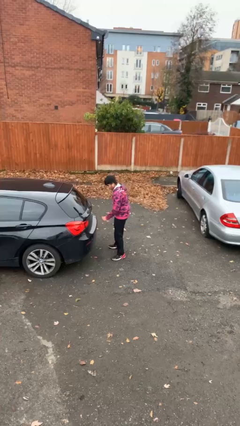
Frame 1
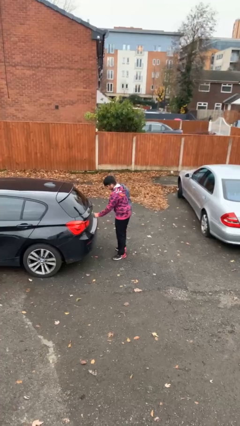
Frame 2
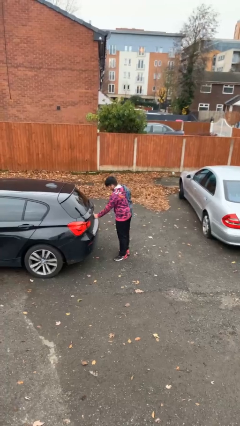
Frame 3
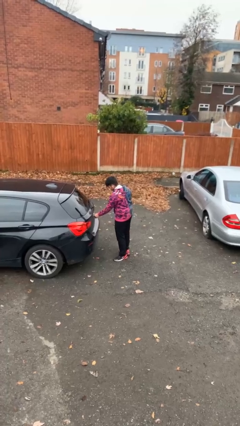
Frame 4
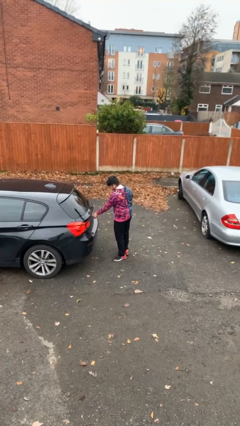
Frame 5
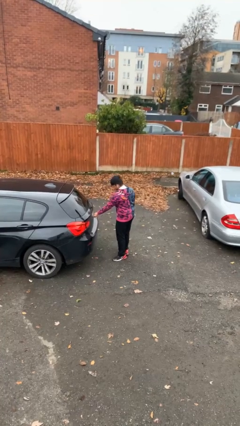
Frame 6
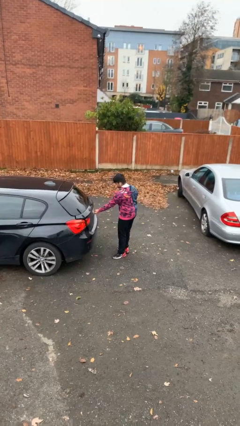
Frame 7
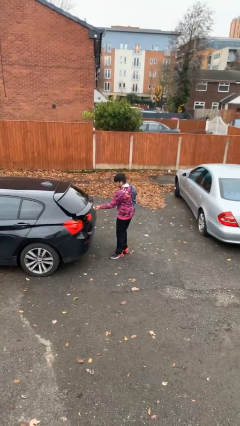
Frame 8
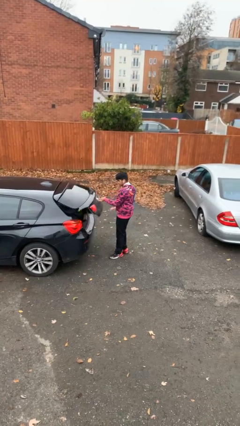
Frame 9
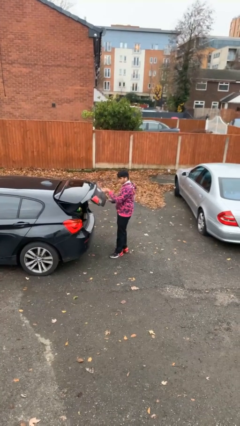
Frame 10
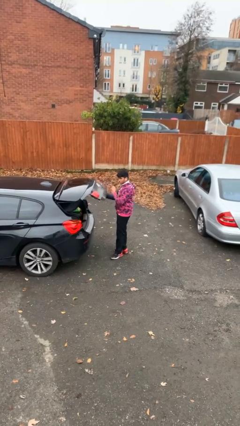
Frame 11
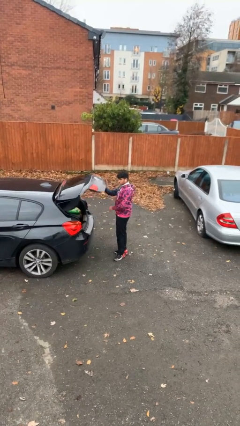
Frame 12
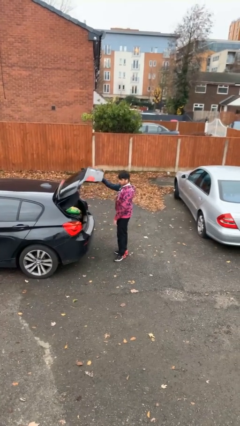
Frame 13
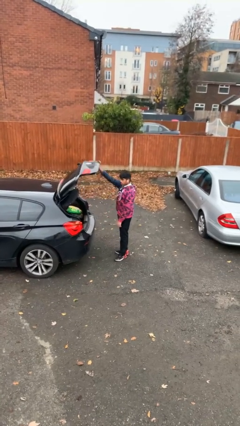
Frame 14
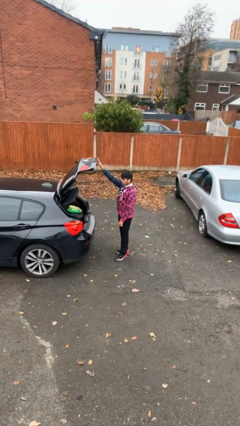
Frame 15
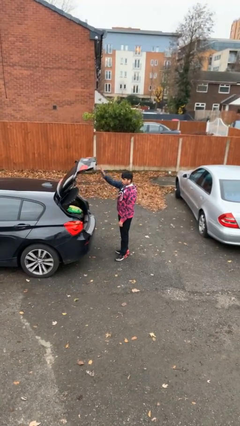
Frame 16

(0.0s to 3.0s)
person opens car trunk

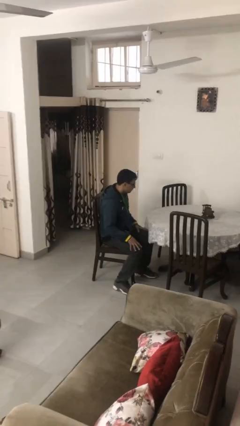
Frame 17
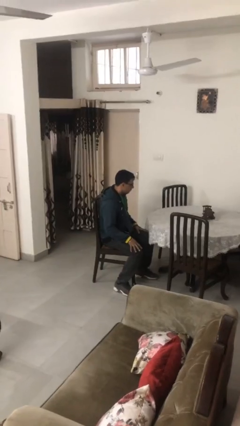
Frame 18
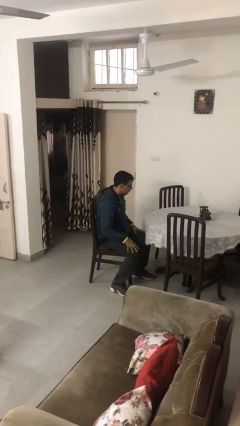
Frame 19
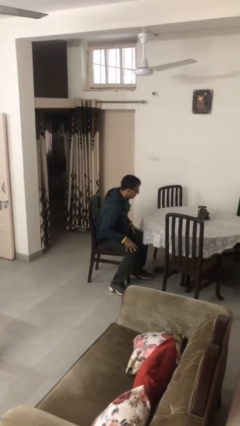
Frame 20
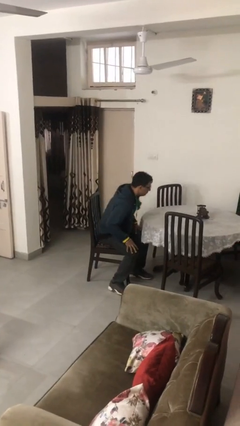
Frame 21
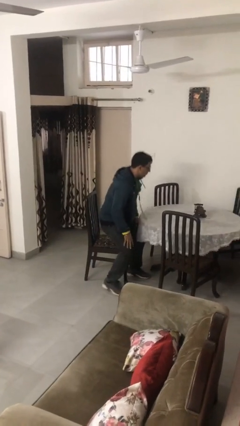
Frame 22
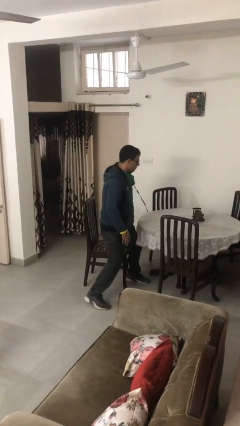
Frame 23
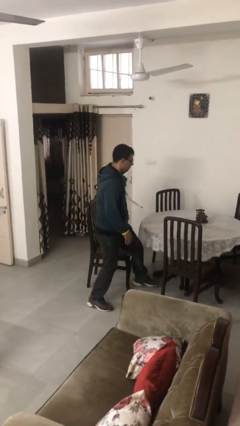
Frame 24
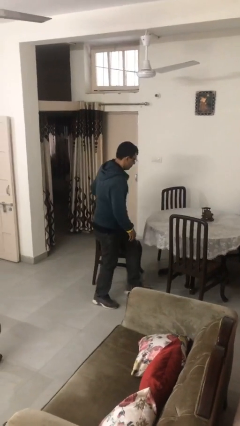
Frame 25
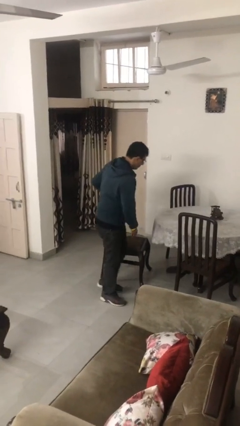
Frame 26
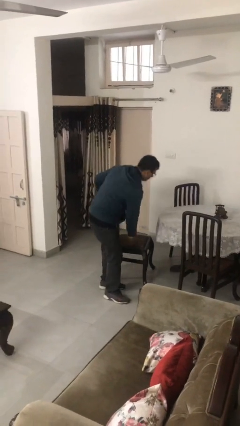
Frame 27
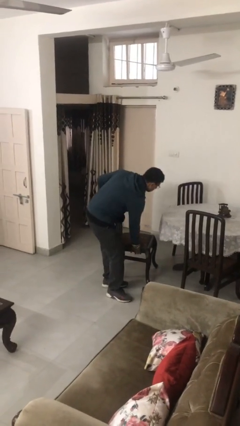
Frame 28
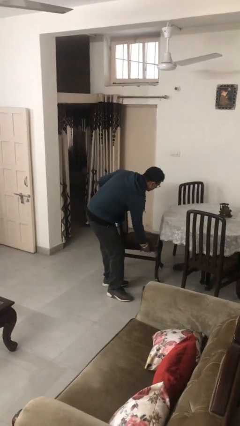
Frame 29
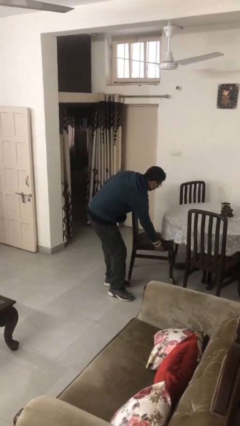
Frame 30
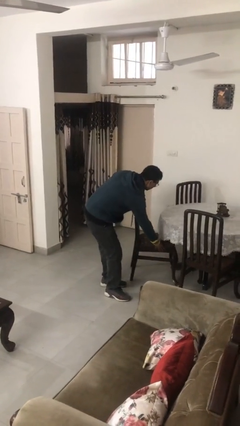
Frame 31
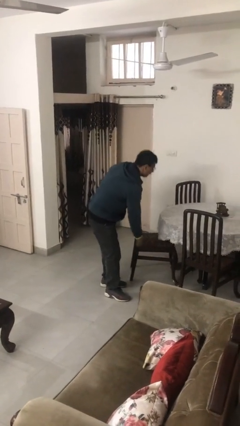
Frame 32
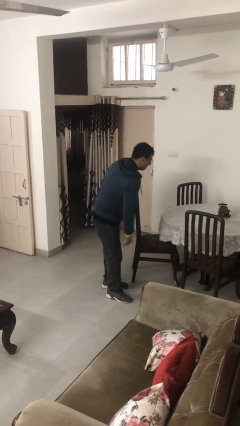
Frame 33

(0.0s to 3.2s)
person stands up

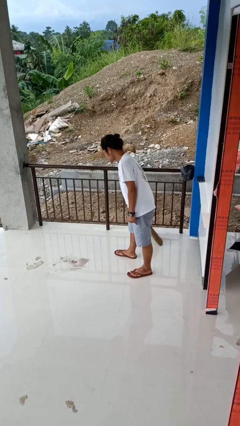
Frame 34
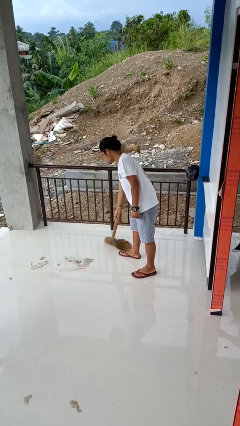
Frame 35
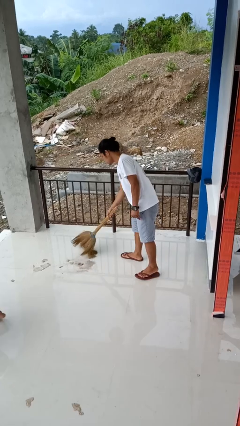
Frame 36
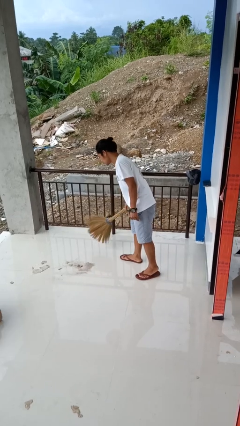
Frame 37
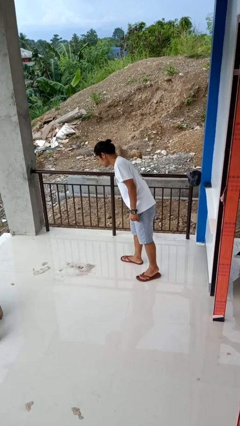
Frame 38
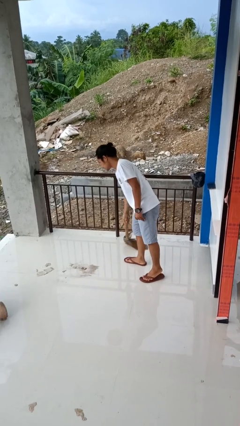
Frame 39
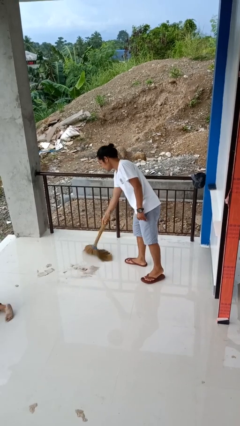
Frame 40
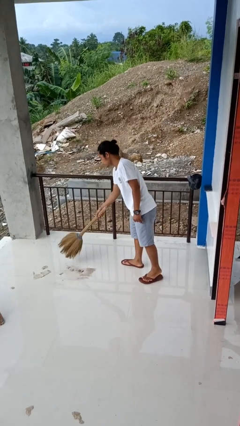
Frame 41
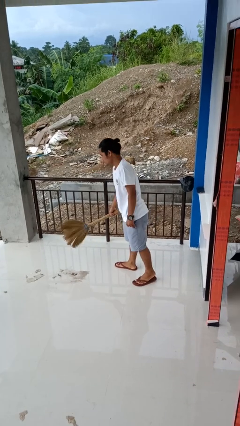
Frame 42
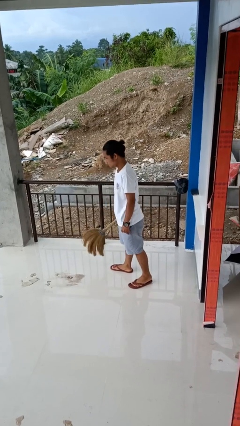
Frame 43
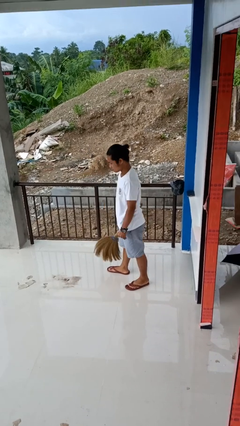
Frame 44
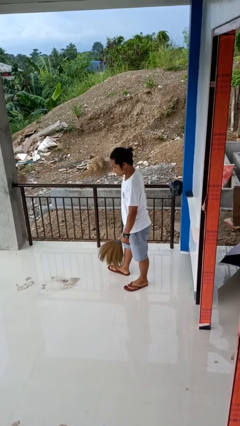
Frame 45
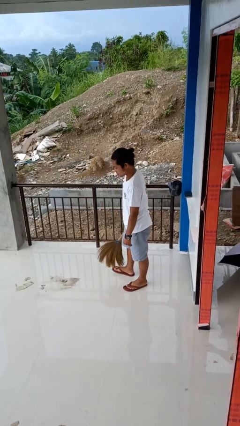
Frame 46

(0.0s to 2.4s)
person sweeps floor

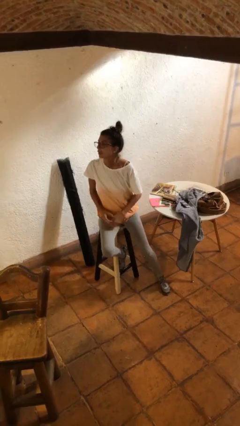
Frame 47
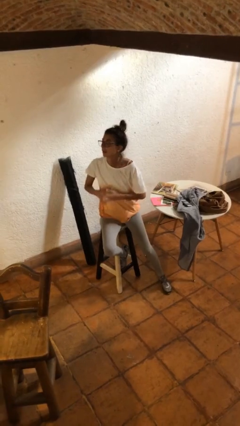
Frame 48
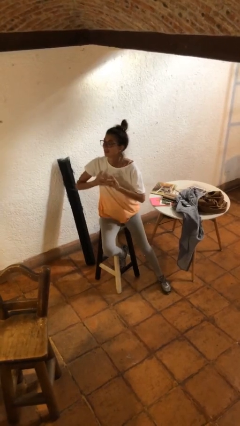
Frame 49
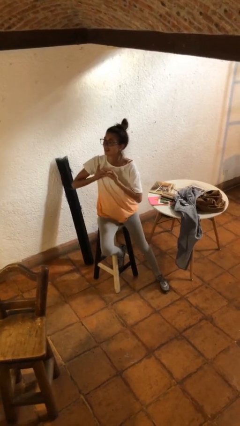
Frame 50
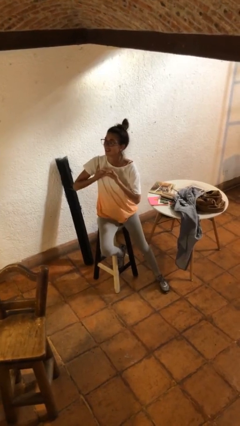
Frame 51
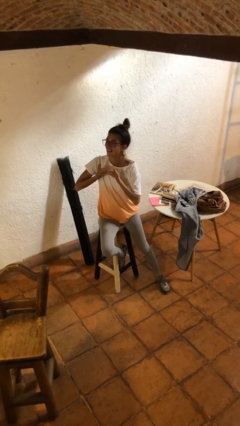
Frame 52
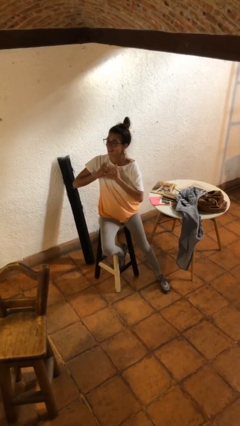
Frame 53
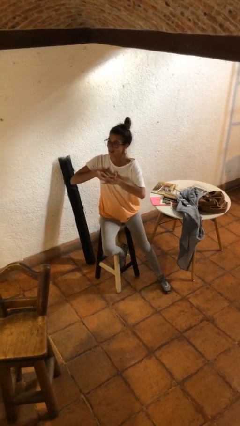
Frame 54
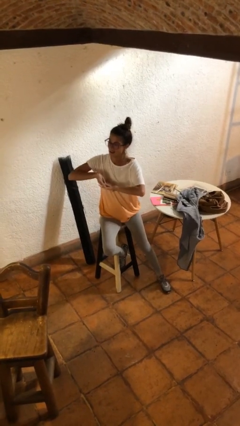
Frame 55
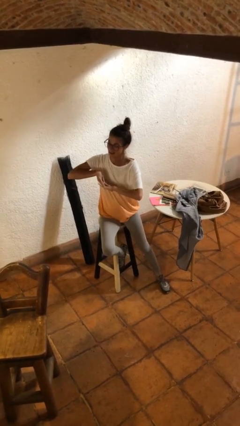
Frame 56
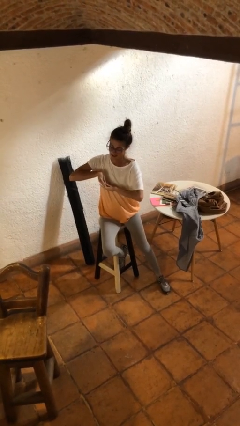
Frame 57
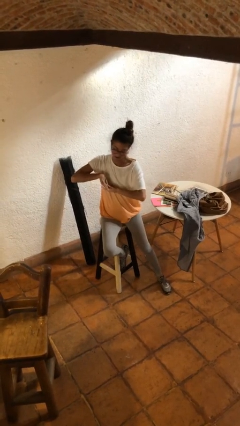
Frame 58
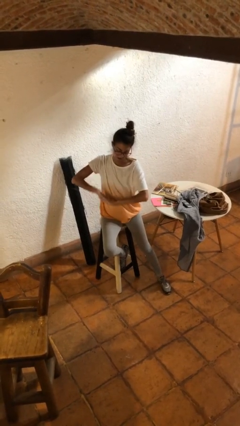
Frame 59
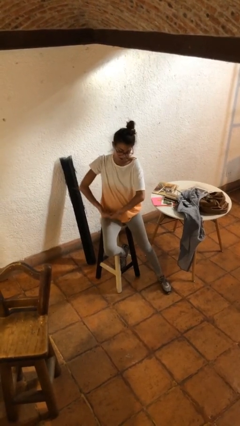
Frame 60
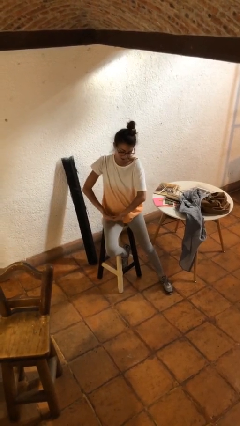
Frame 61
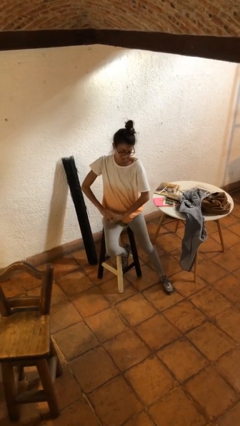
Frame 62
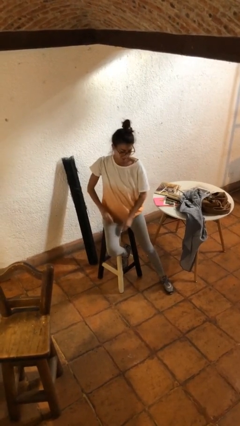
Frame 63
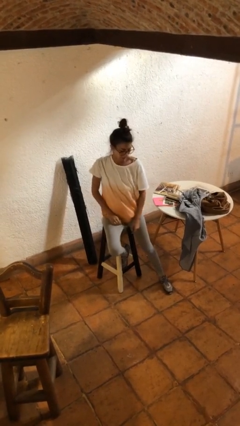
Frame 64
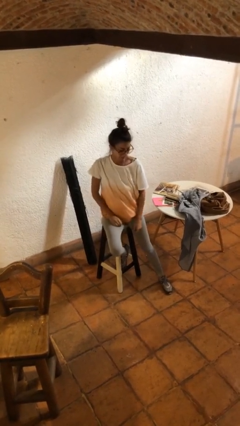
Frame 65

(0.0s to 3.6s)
person cracks knuckles

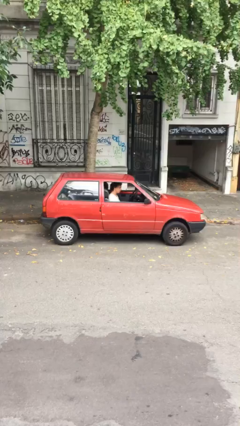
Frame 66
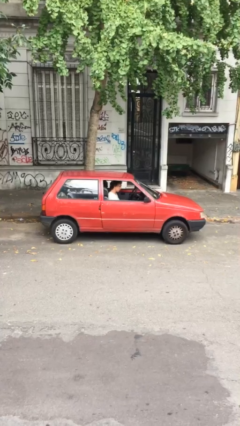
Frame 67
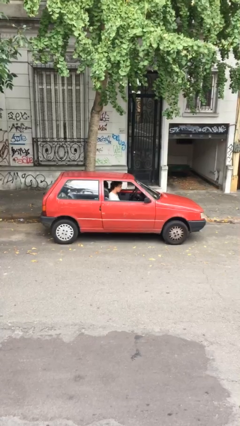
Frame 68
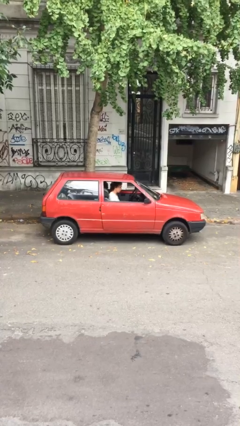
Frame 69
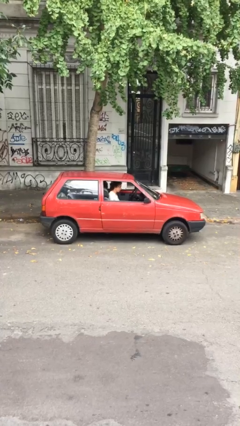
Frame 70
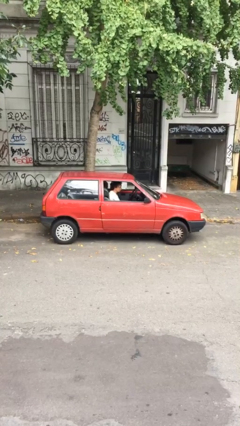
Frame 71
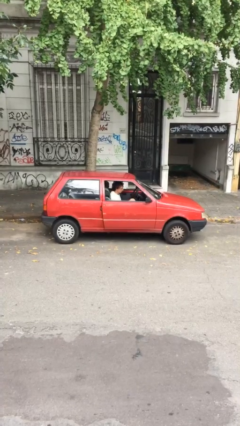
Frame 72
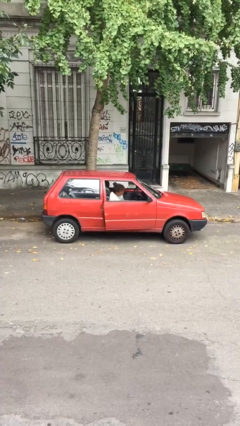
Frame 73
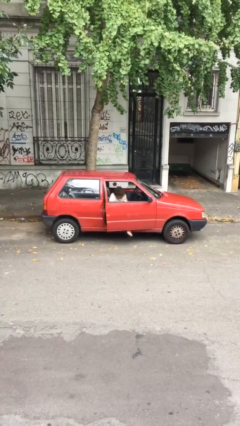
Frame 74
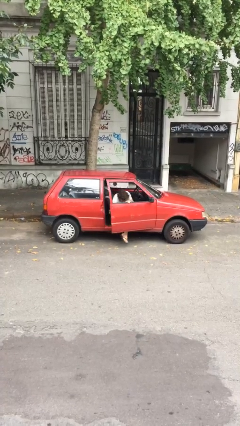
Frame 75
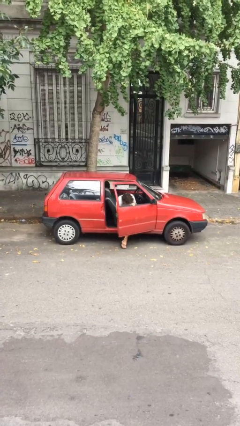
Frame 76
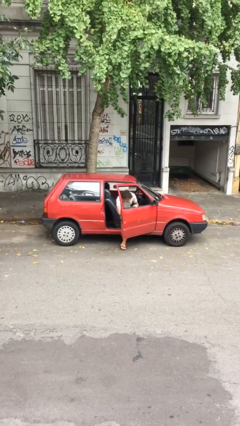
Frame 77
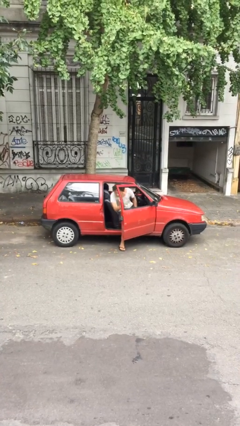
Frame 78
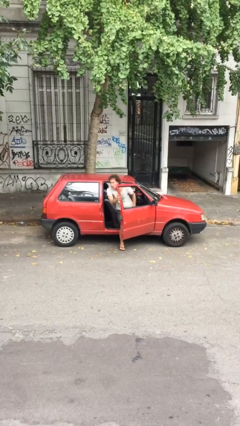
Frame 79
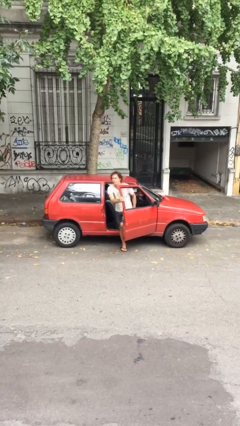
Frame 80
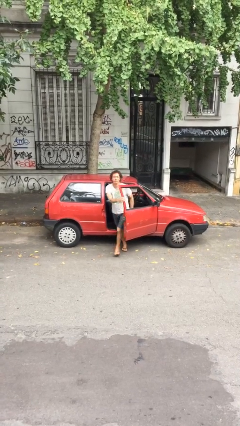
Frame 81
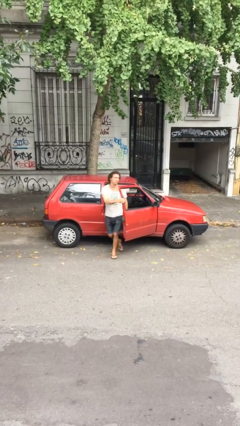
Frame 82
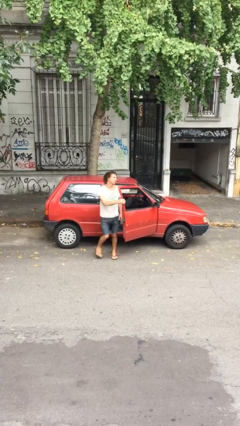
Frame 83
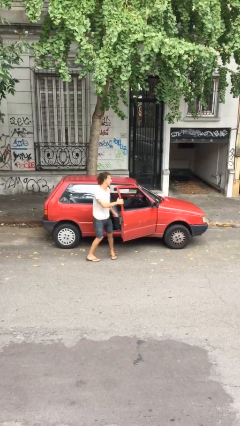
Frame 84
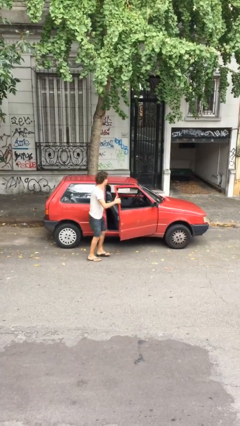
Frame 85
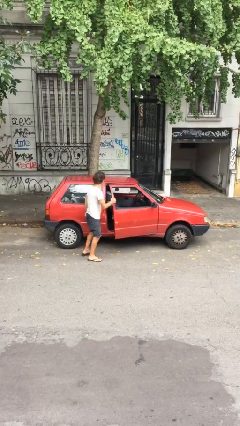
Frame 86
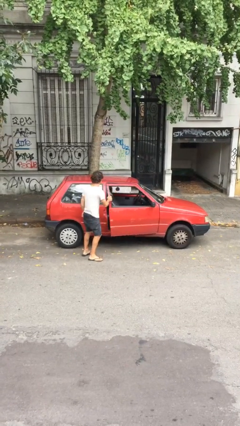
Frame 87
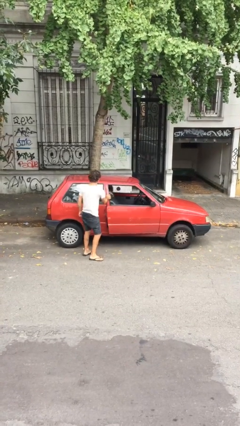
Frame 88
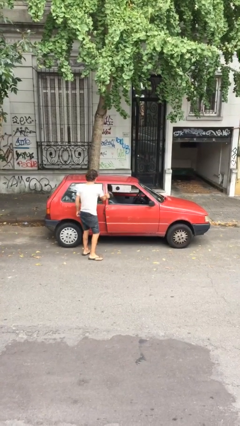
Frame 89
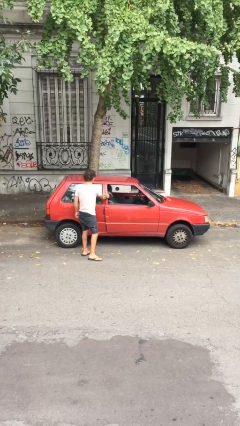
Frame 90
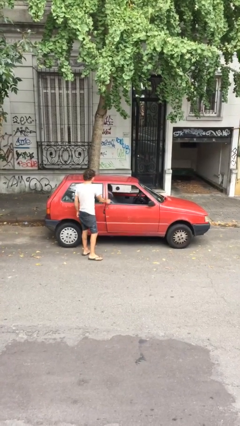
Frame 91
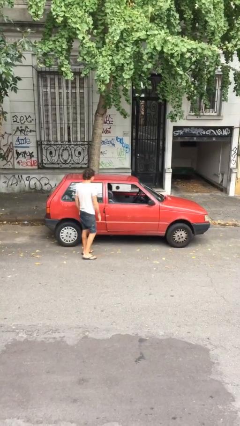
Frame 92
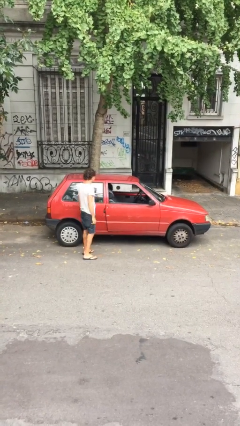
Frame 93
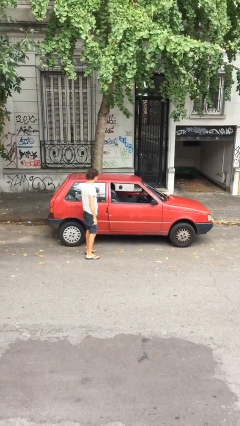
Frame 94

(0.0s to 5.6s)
car drops off person

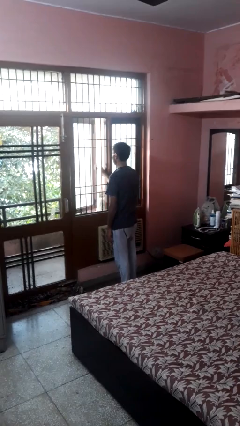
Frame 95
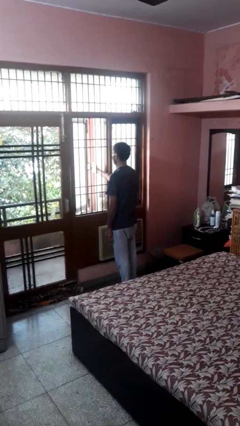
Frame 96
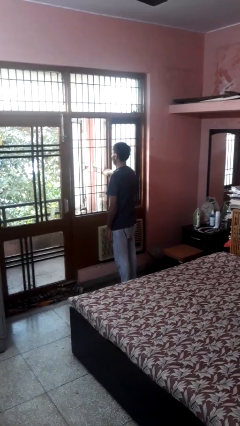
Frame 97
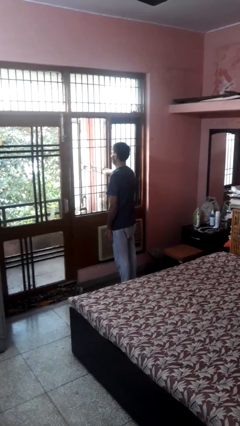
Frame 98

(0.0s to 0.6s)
person opens home window
